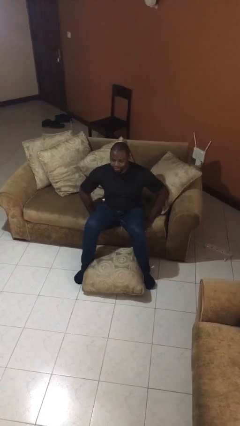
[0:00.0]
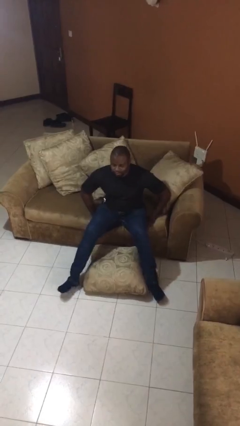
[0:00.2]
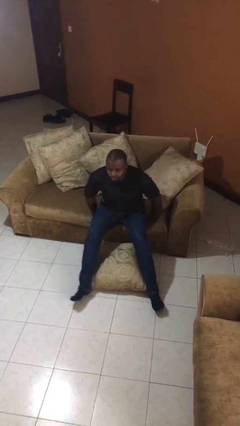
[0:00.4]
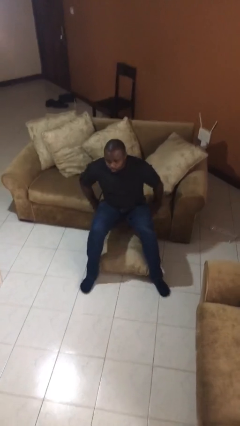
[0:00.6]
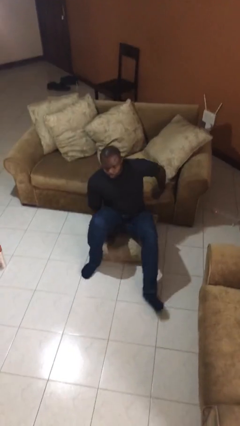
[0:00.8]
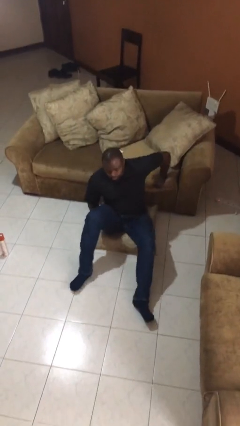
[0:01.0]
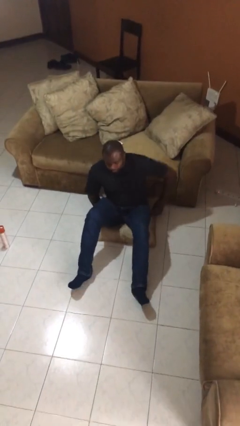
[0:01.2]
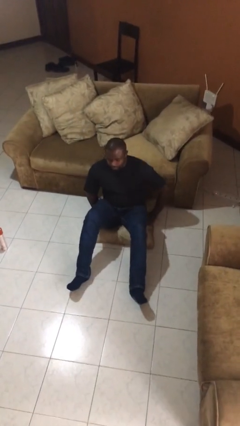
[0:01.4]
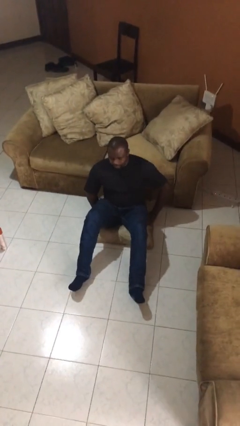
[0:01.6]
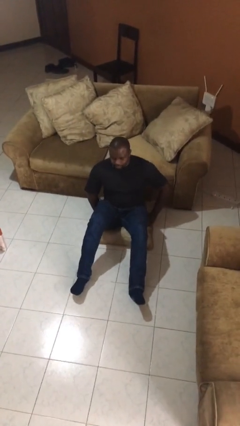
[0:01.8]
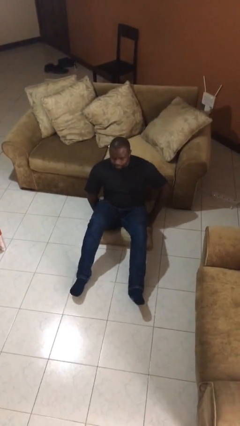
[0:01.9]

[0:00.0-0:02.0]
person falls from chair

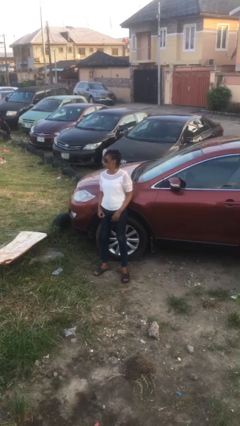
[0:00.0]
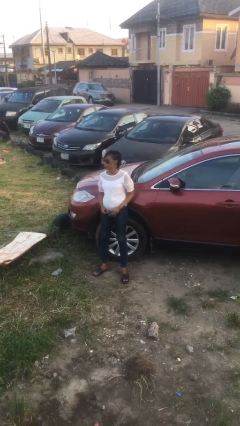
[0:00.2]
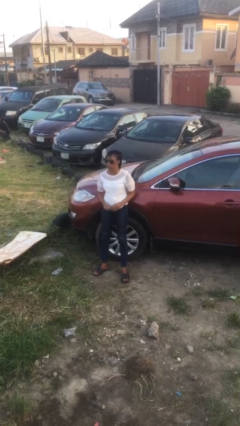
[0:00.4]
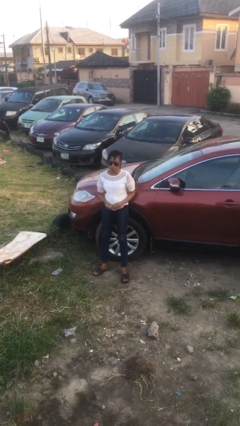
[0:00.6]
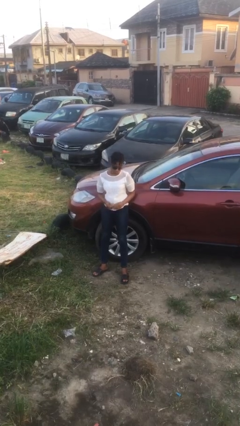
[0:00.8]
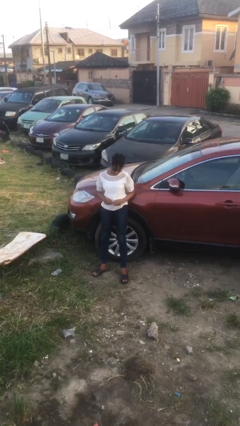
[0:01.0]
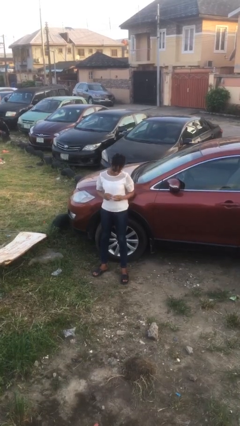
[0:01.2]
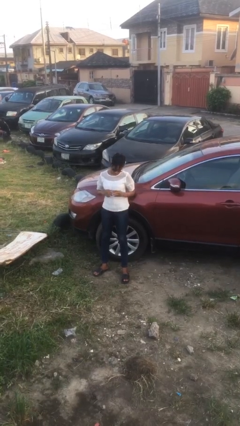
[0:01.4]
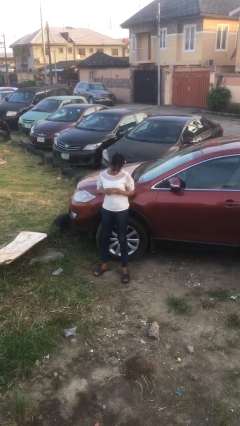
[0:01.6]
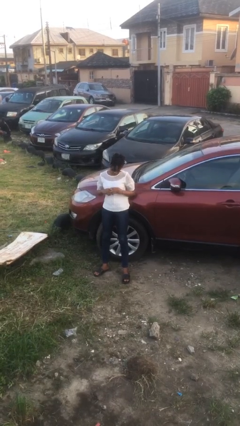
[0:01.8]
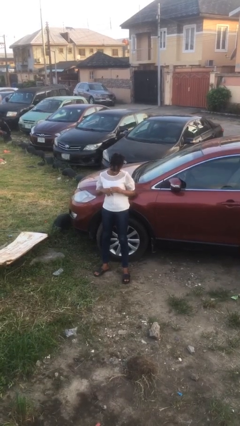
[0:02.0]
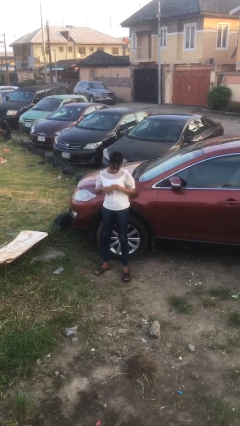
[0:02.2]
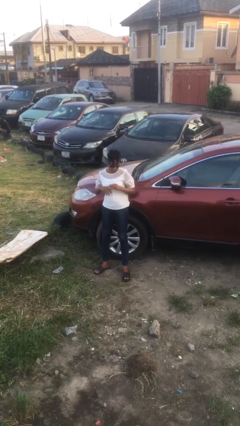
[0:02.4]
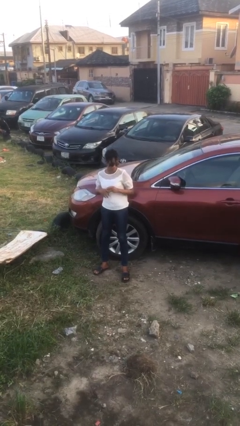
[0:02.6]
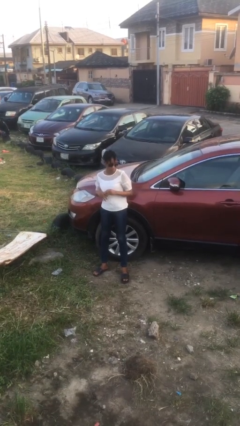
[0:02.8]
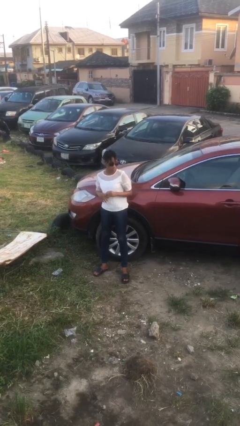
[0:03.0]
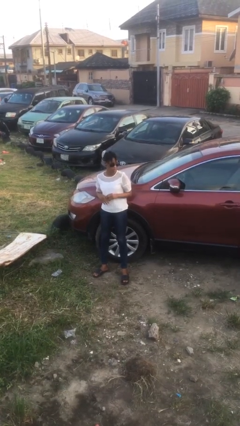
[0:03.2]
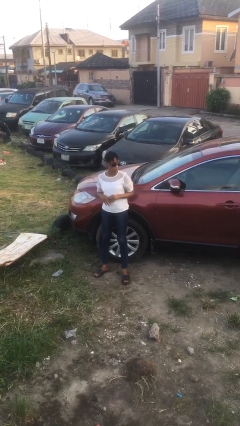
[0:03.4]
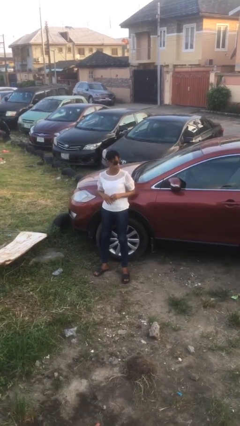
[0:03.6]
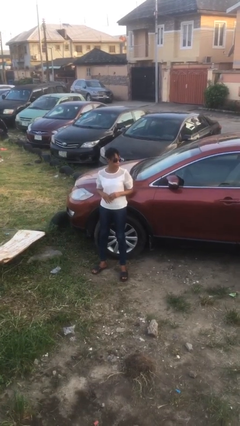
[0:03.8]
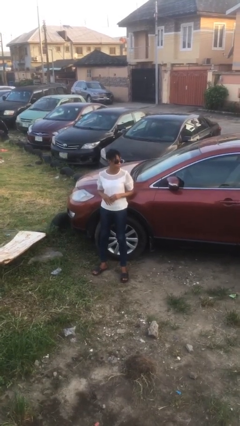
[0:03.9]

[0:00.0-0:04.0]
person puts on ring

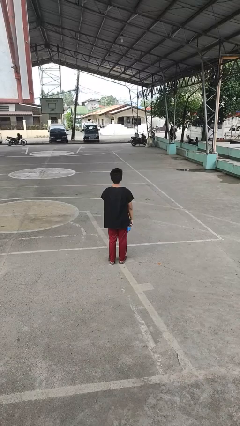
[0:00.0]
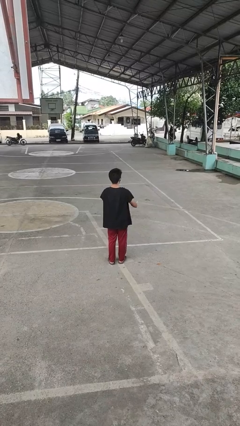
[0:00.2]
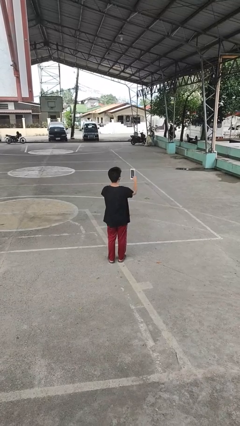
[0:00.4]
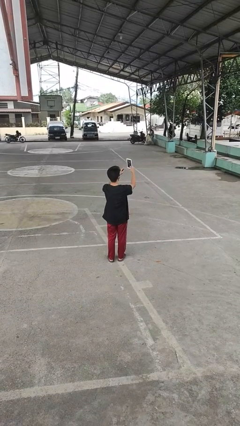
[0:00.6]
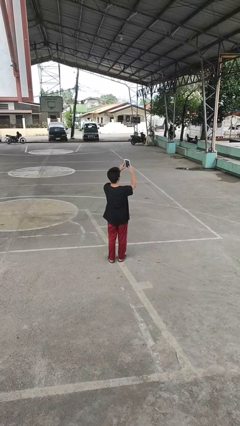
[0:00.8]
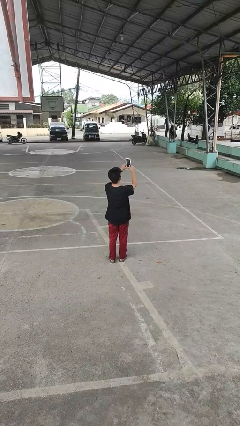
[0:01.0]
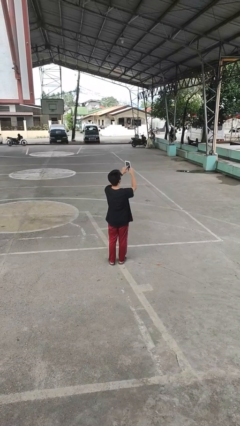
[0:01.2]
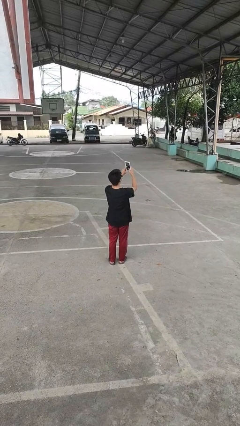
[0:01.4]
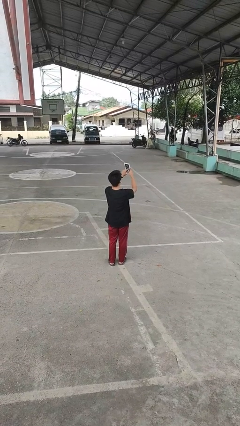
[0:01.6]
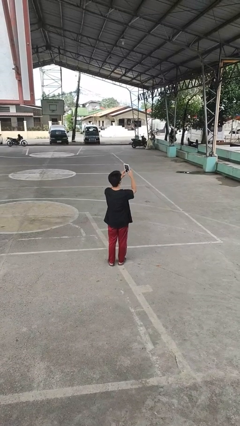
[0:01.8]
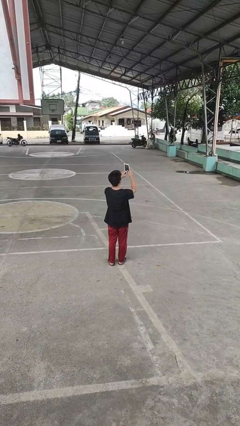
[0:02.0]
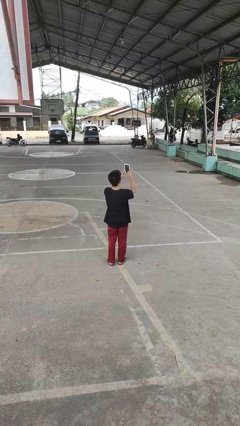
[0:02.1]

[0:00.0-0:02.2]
person interacts with tablet

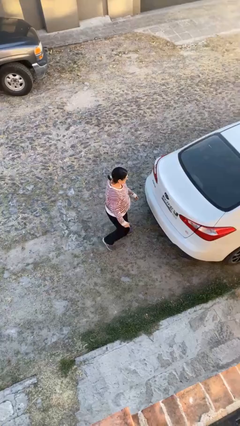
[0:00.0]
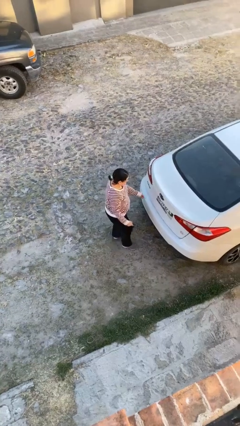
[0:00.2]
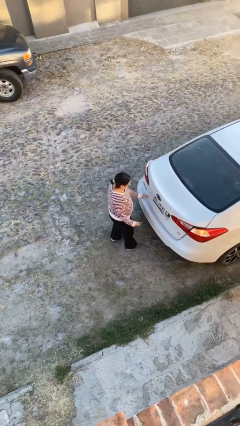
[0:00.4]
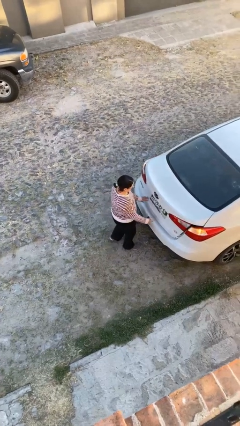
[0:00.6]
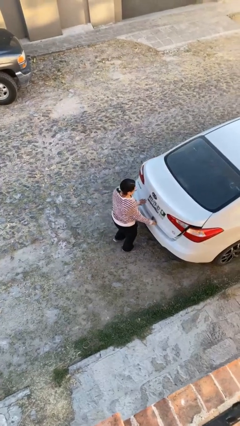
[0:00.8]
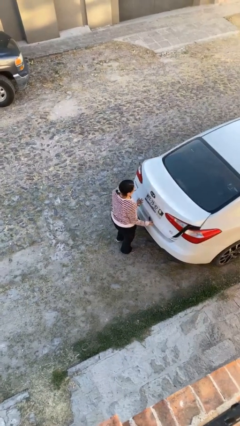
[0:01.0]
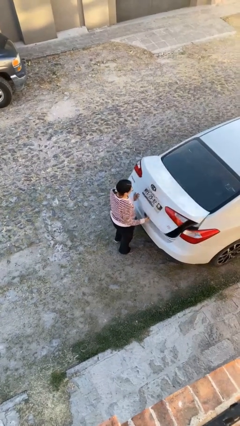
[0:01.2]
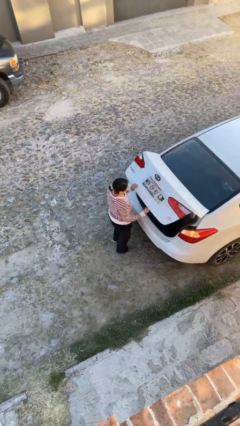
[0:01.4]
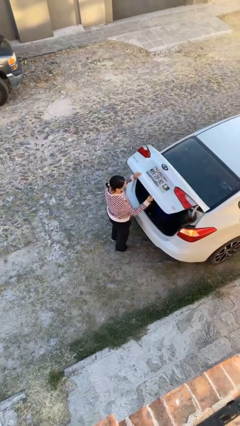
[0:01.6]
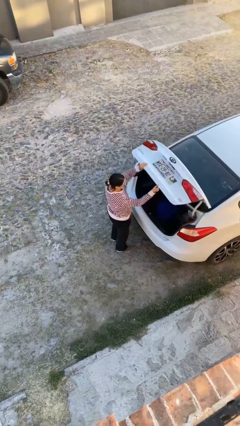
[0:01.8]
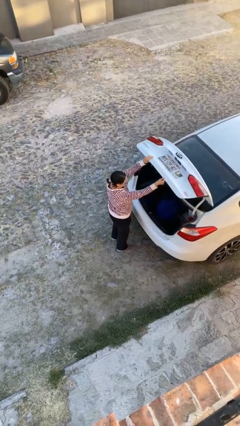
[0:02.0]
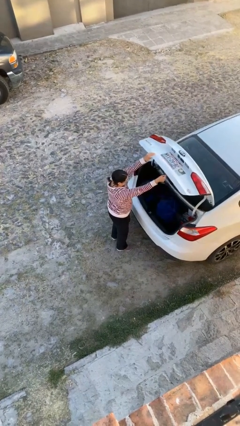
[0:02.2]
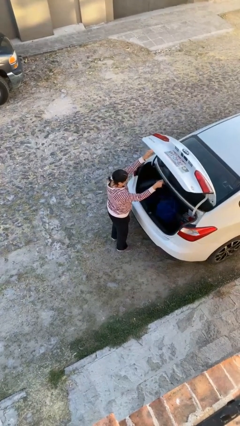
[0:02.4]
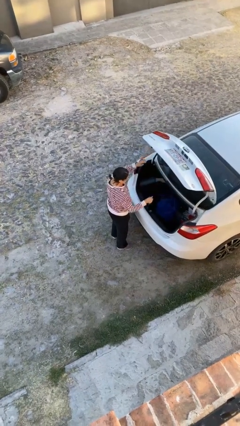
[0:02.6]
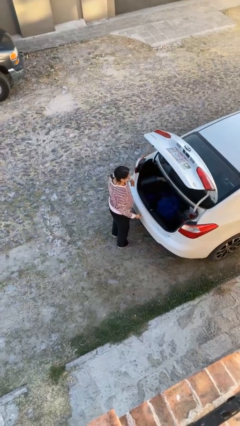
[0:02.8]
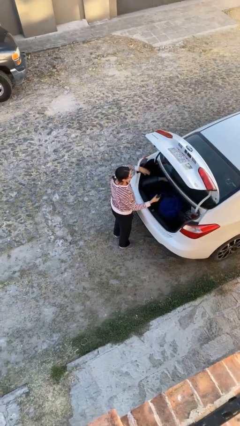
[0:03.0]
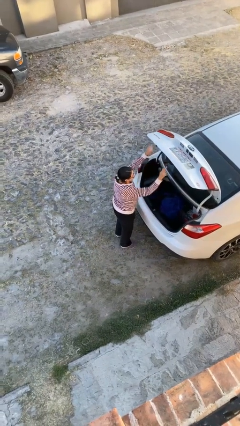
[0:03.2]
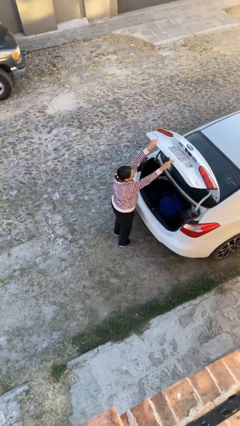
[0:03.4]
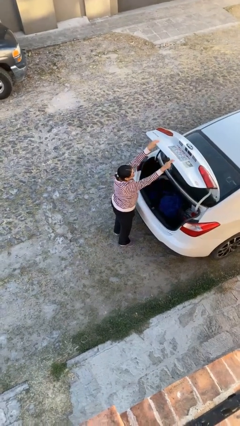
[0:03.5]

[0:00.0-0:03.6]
person opens car trunk

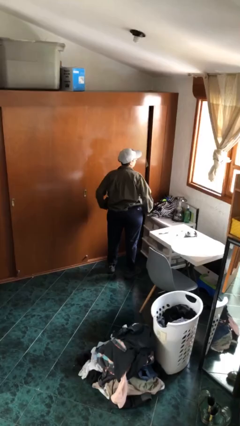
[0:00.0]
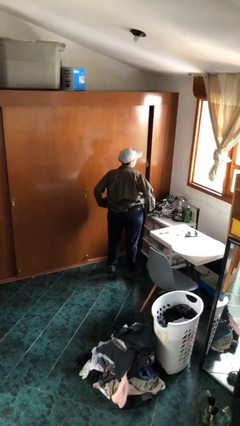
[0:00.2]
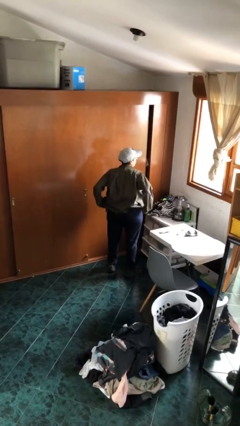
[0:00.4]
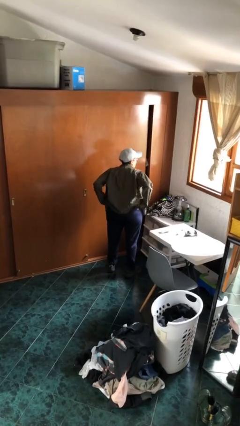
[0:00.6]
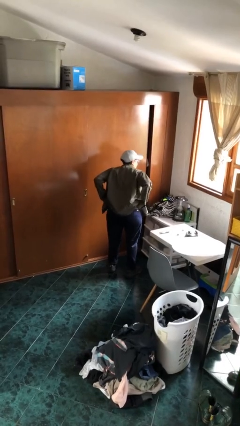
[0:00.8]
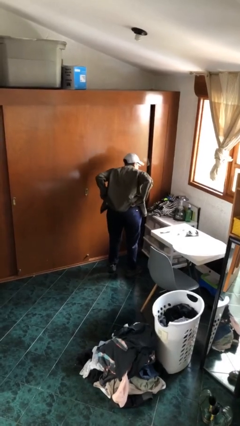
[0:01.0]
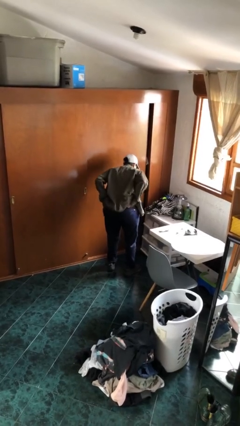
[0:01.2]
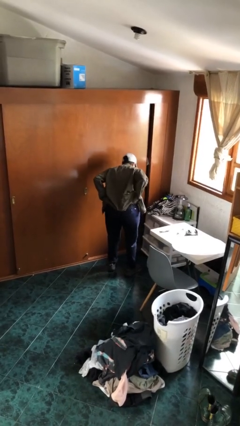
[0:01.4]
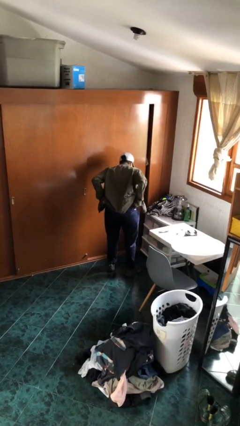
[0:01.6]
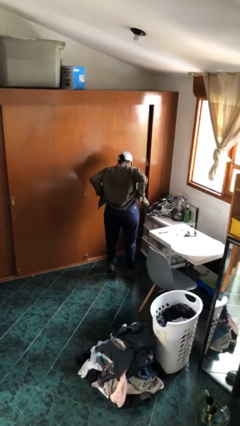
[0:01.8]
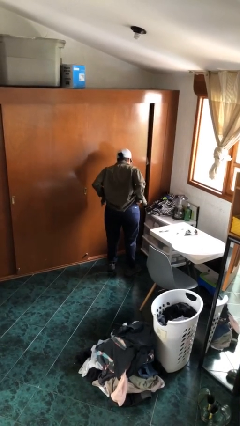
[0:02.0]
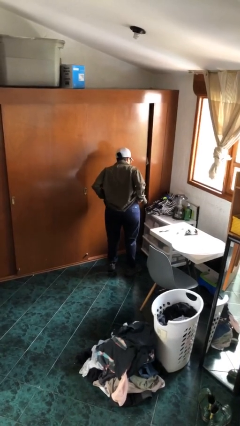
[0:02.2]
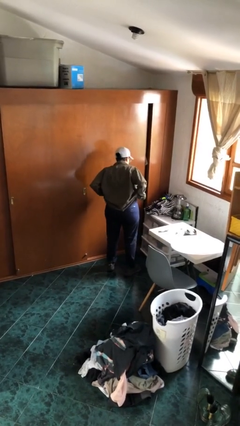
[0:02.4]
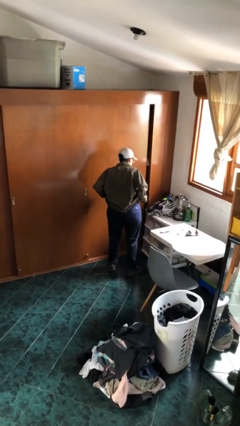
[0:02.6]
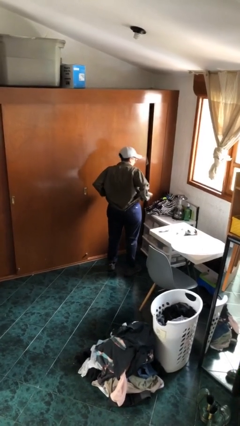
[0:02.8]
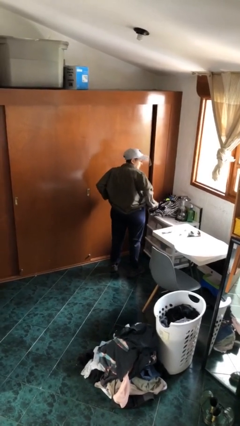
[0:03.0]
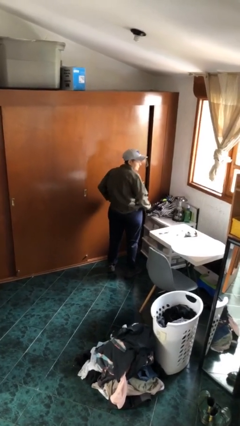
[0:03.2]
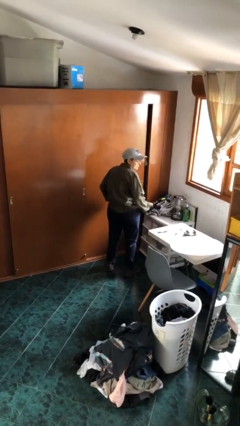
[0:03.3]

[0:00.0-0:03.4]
person hikes up pants

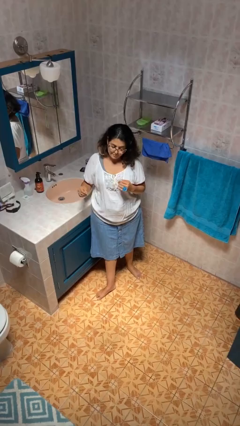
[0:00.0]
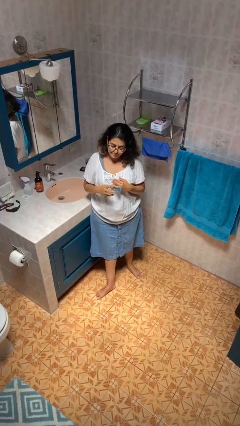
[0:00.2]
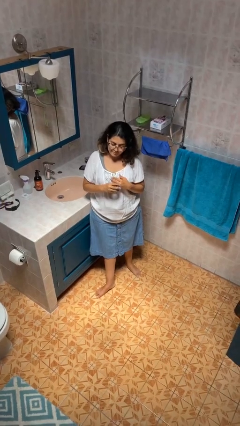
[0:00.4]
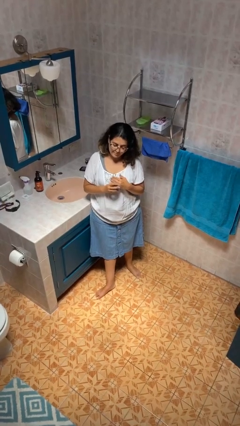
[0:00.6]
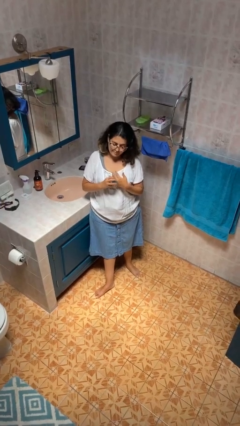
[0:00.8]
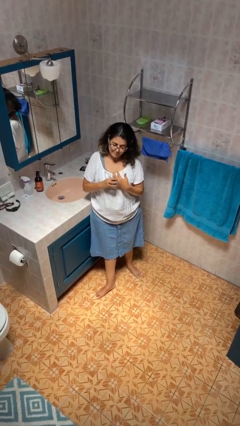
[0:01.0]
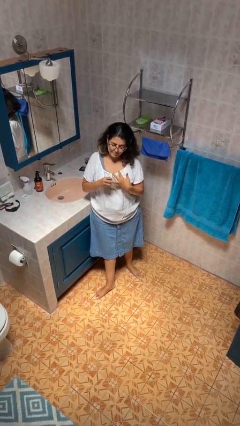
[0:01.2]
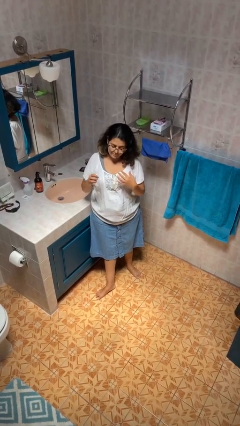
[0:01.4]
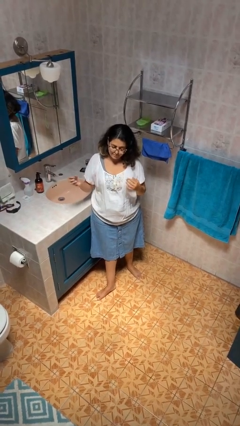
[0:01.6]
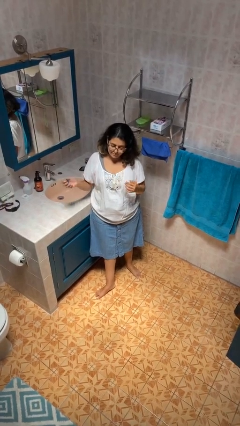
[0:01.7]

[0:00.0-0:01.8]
person takes off ring

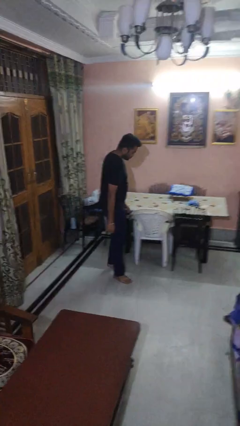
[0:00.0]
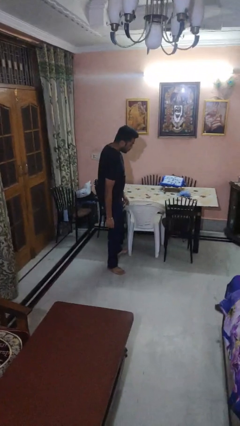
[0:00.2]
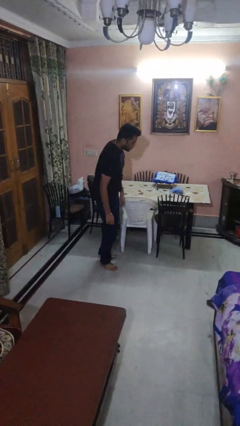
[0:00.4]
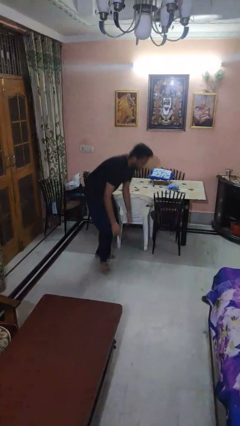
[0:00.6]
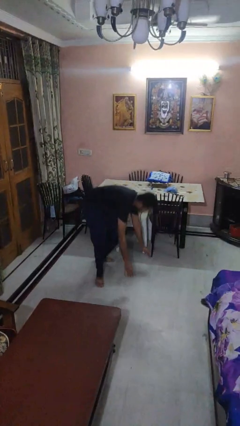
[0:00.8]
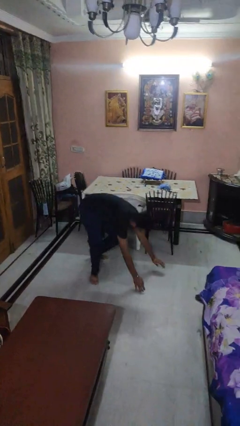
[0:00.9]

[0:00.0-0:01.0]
person trips on object on floor
